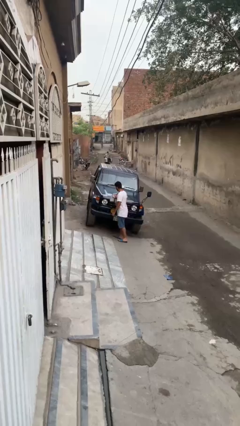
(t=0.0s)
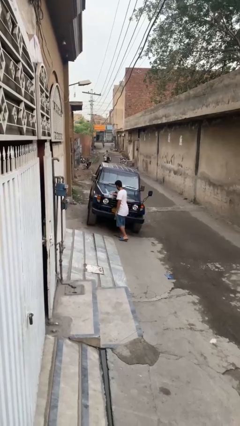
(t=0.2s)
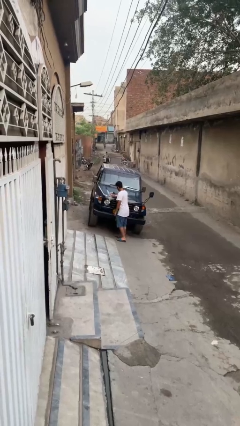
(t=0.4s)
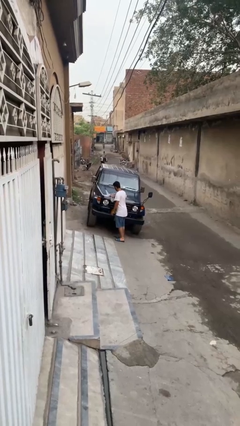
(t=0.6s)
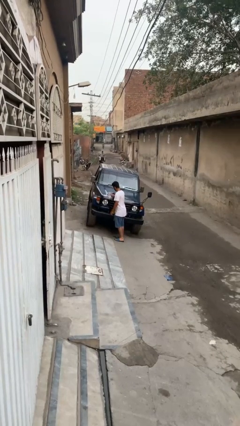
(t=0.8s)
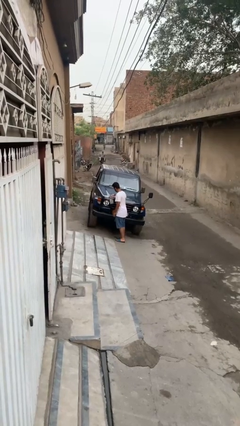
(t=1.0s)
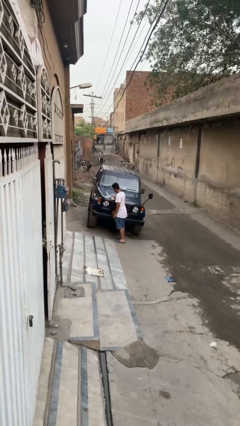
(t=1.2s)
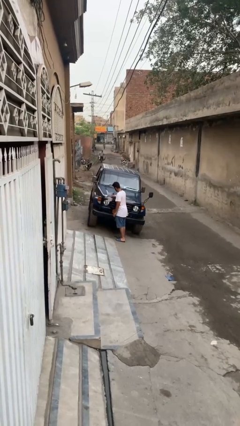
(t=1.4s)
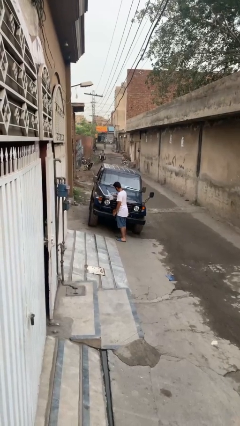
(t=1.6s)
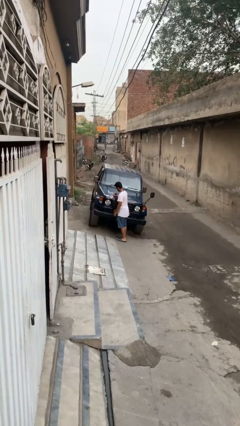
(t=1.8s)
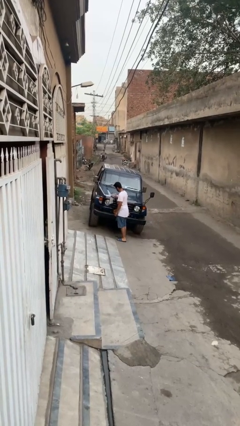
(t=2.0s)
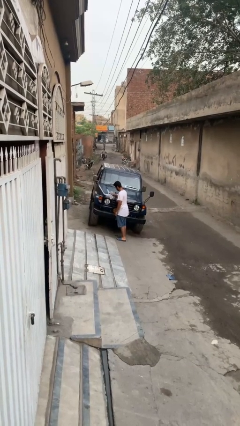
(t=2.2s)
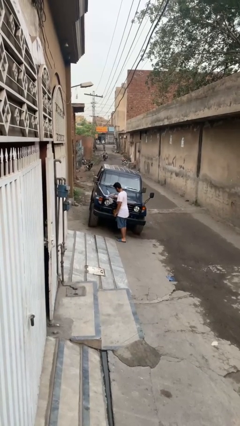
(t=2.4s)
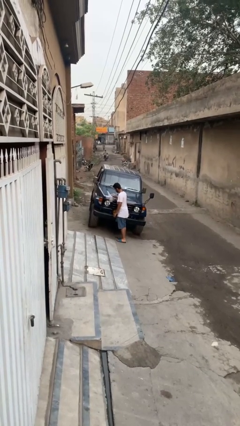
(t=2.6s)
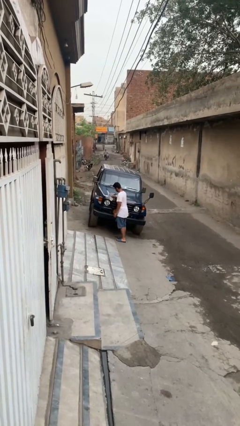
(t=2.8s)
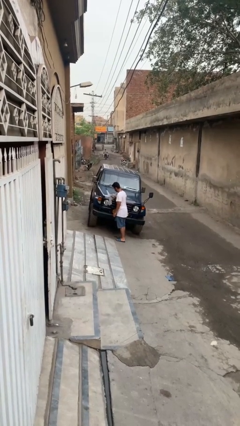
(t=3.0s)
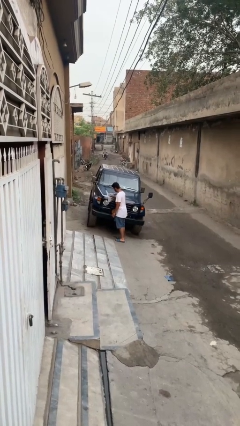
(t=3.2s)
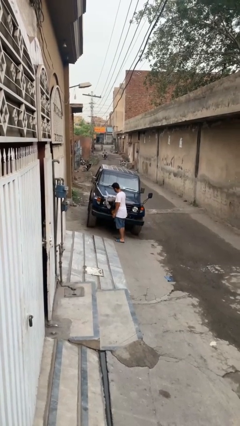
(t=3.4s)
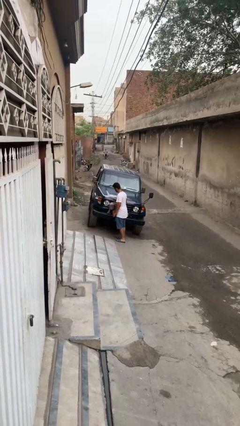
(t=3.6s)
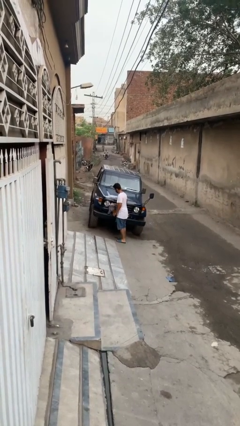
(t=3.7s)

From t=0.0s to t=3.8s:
person polishes car with rag

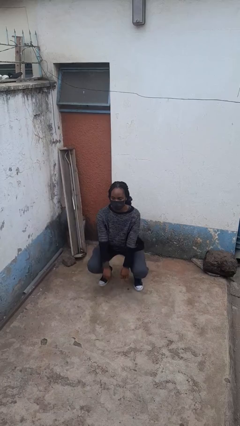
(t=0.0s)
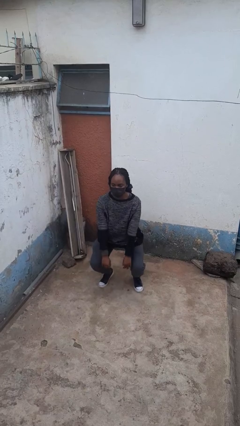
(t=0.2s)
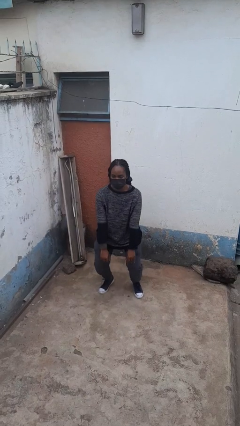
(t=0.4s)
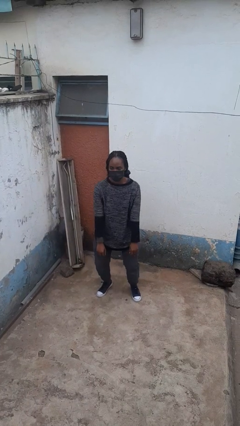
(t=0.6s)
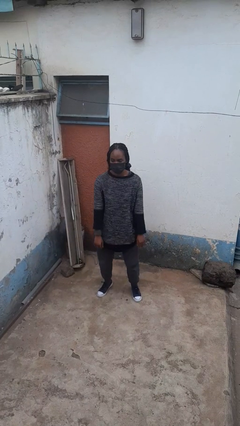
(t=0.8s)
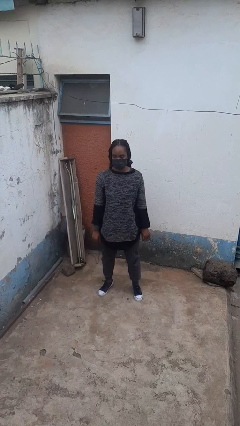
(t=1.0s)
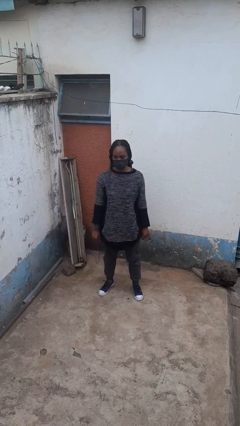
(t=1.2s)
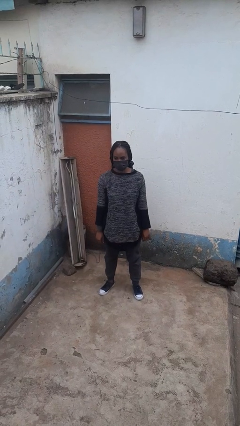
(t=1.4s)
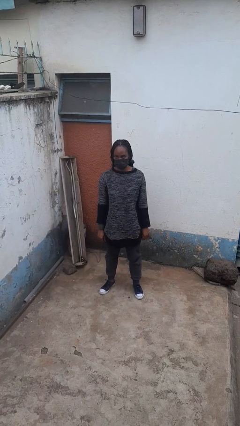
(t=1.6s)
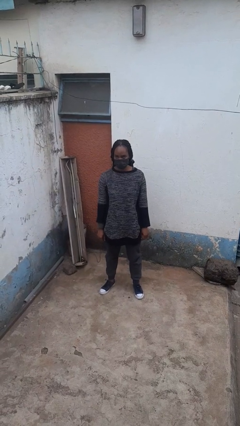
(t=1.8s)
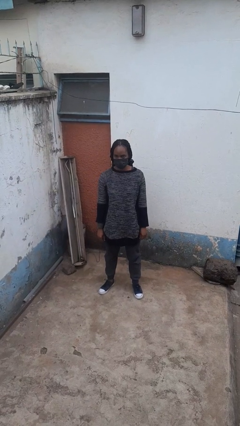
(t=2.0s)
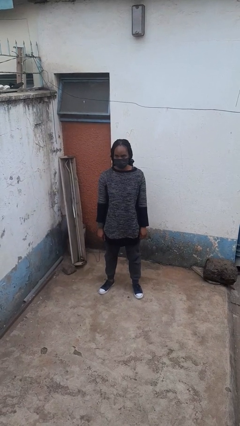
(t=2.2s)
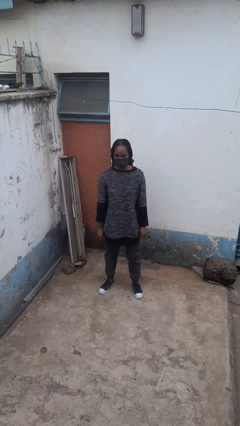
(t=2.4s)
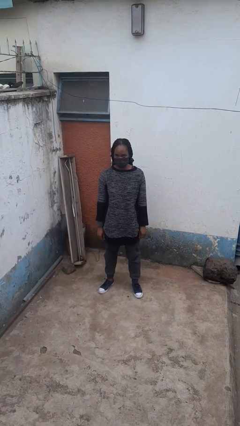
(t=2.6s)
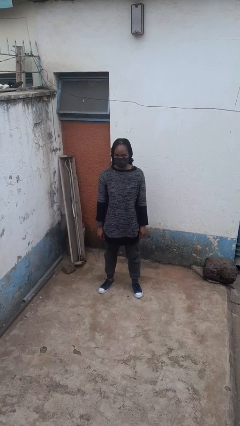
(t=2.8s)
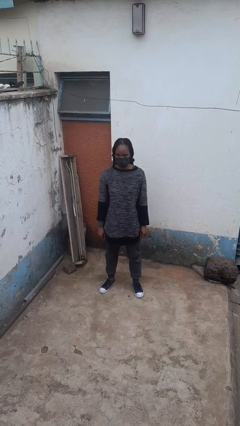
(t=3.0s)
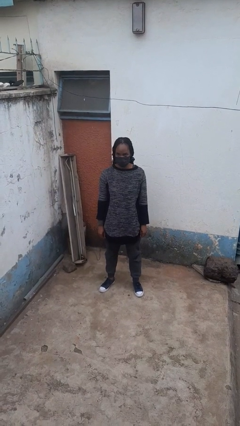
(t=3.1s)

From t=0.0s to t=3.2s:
person stands up

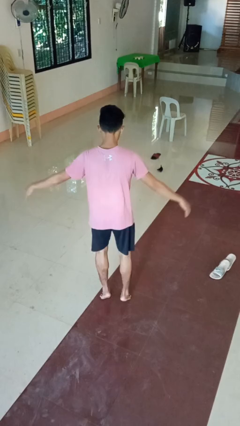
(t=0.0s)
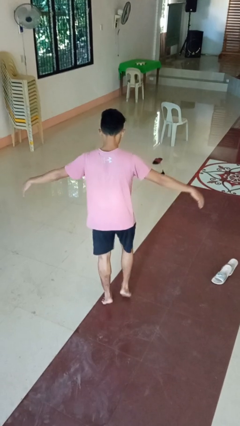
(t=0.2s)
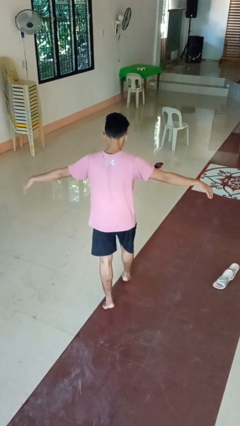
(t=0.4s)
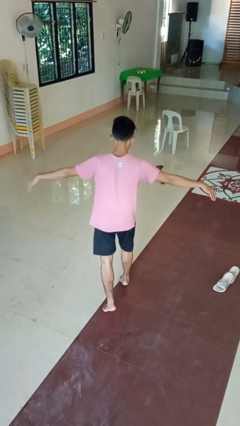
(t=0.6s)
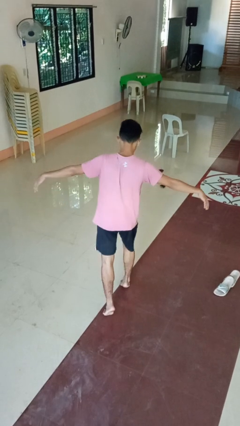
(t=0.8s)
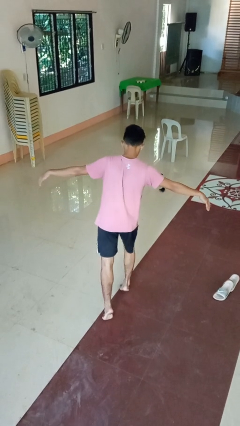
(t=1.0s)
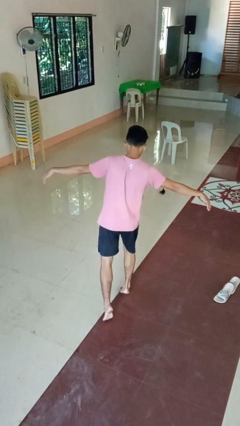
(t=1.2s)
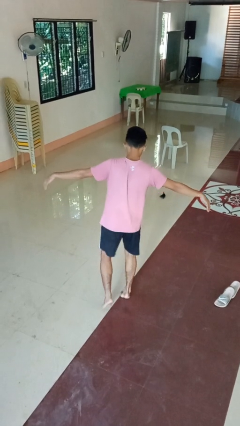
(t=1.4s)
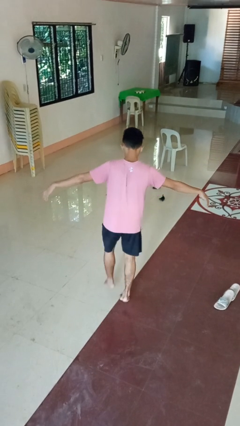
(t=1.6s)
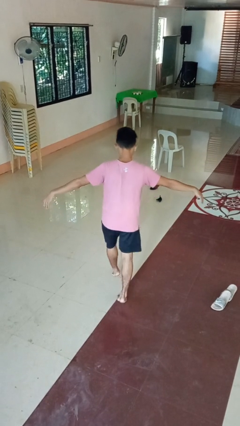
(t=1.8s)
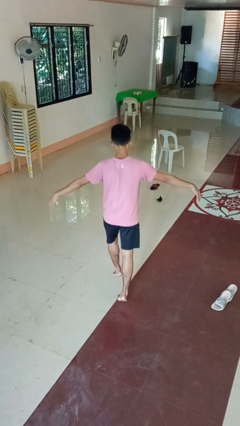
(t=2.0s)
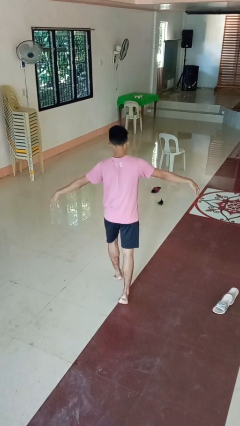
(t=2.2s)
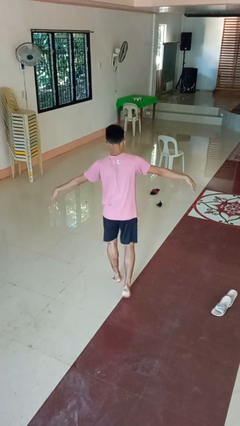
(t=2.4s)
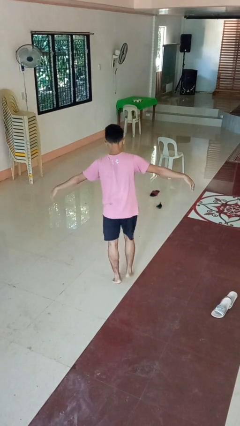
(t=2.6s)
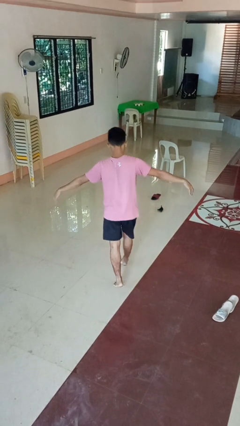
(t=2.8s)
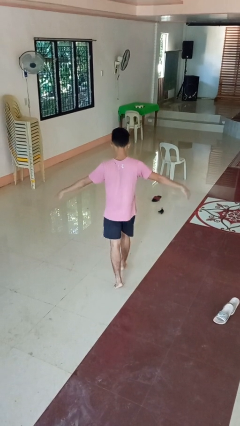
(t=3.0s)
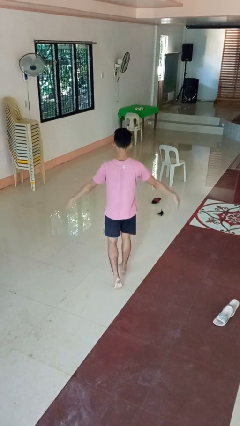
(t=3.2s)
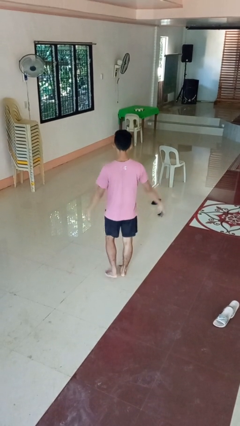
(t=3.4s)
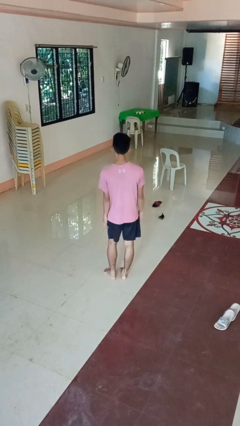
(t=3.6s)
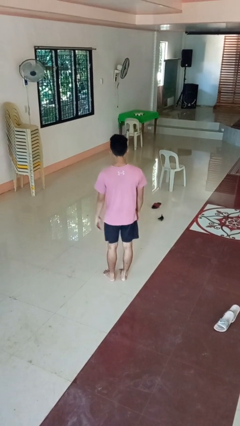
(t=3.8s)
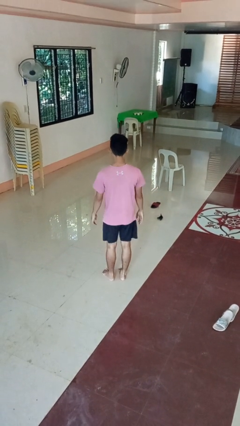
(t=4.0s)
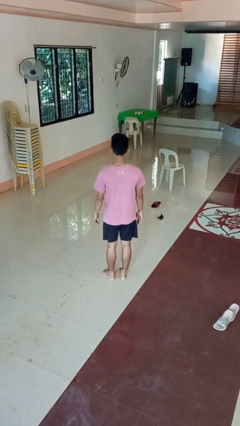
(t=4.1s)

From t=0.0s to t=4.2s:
person walks tiptoe

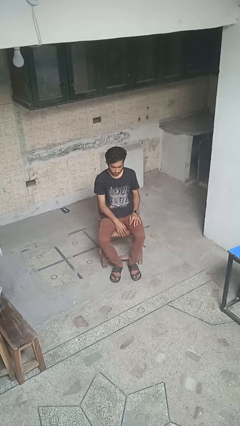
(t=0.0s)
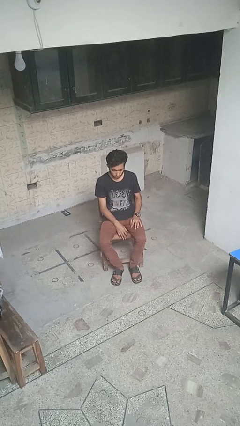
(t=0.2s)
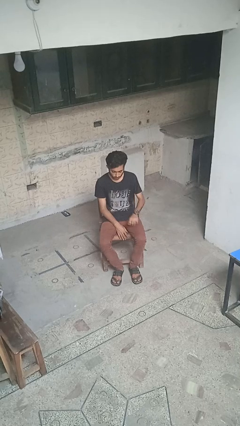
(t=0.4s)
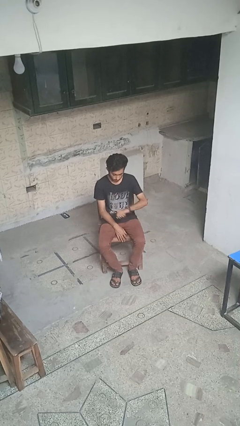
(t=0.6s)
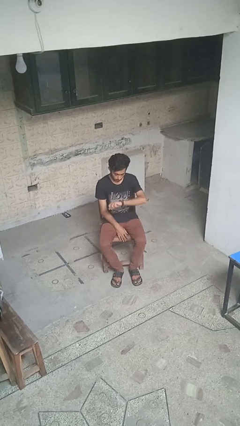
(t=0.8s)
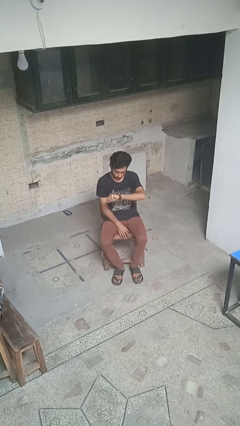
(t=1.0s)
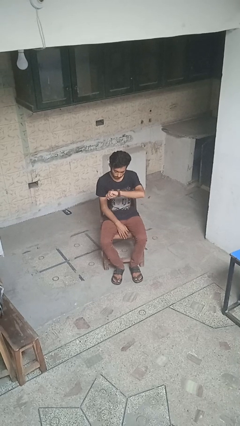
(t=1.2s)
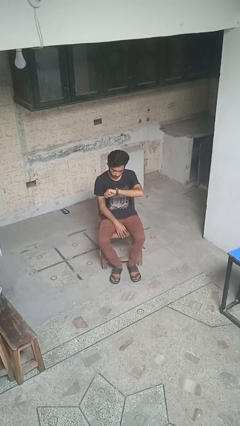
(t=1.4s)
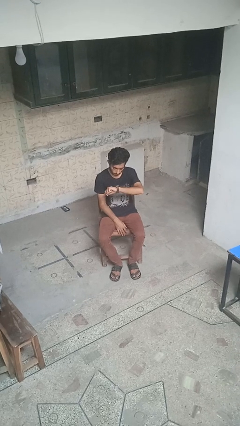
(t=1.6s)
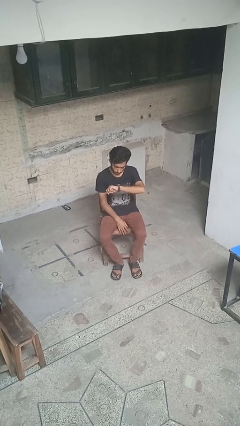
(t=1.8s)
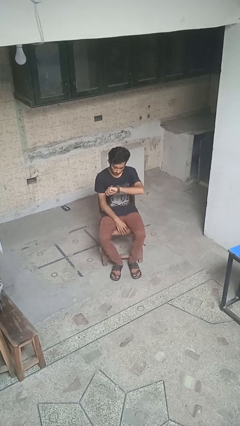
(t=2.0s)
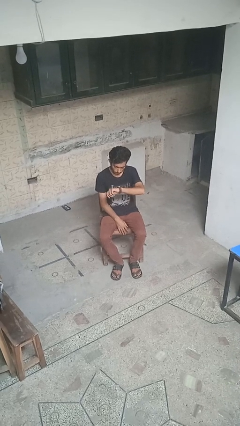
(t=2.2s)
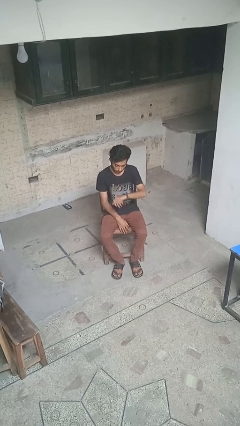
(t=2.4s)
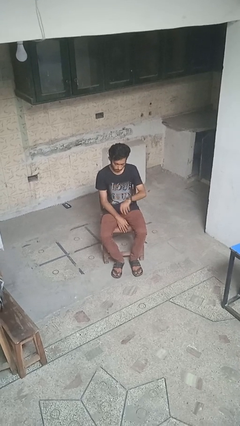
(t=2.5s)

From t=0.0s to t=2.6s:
person looks at wristwatch

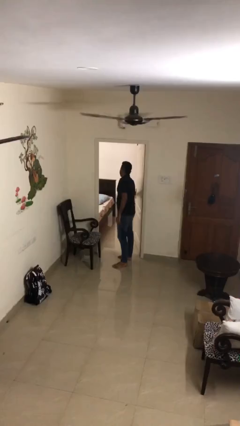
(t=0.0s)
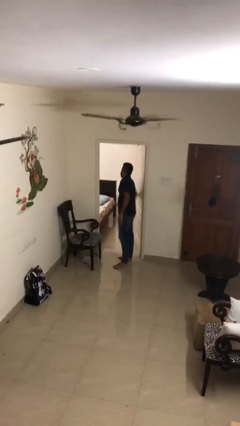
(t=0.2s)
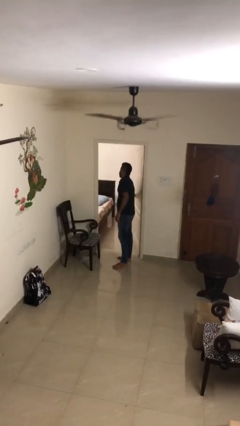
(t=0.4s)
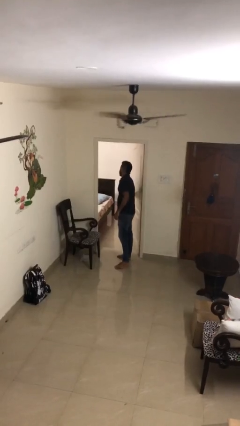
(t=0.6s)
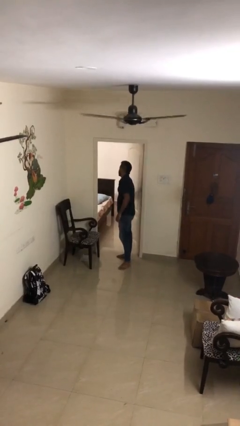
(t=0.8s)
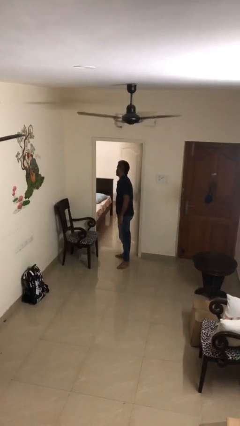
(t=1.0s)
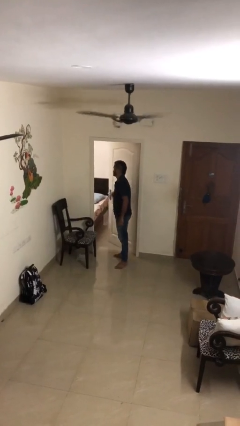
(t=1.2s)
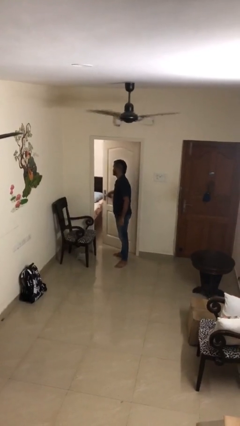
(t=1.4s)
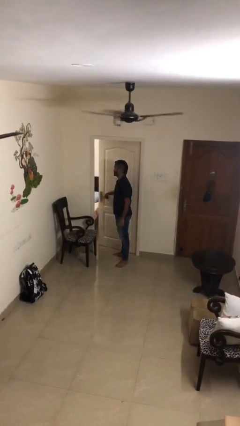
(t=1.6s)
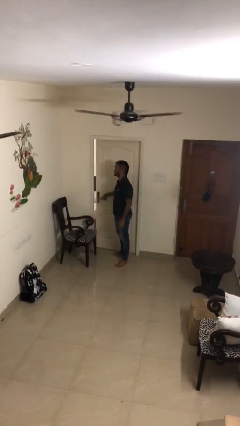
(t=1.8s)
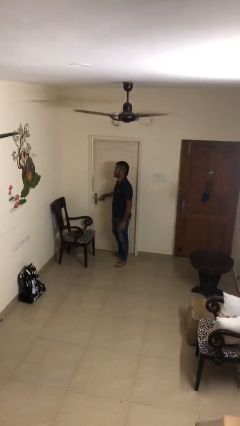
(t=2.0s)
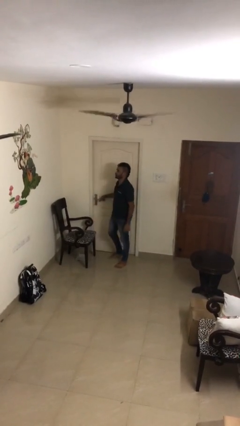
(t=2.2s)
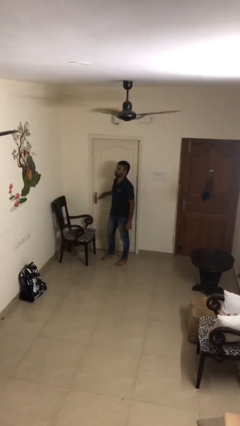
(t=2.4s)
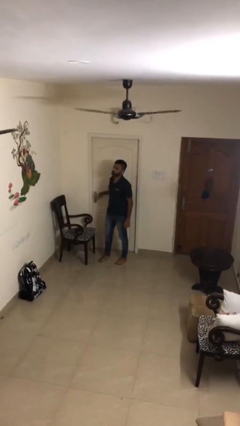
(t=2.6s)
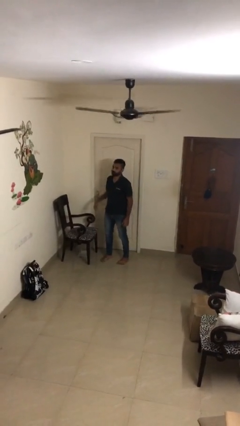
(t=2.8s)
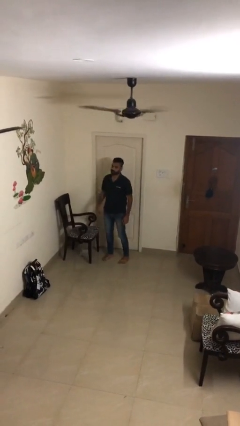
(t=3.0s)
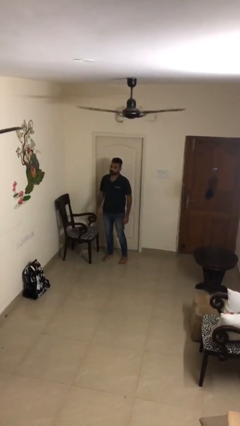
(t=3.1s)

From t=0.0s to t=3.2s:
person closes facility door

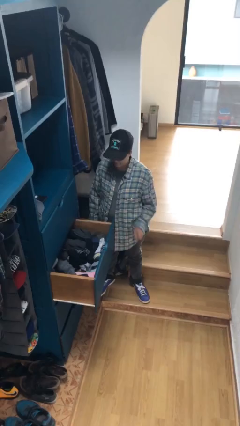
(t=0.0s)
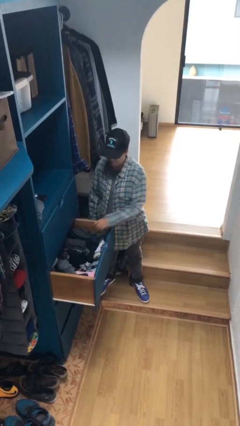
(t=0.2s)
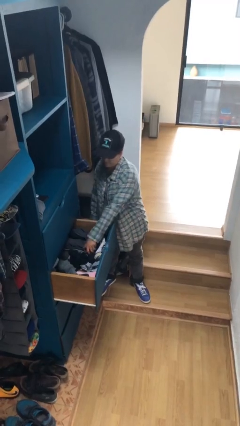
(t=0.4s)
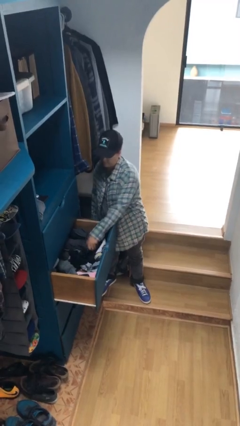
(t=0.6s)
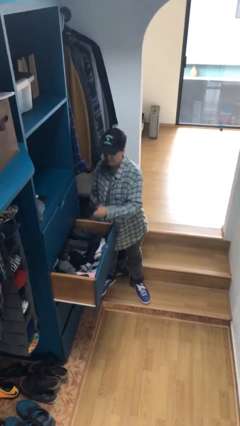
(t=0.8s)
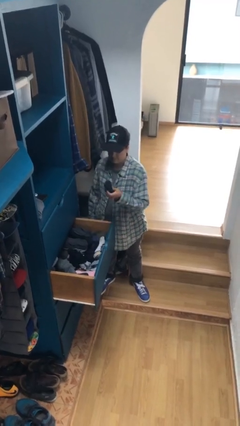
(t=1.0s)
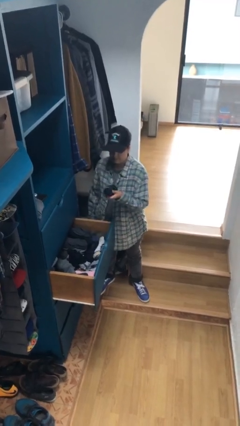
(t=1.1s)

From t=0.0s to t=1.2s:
person takes clothes from dresser
